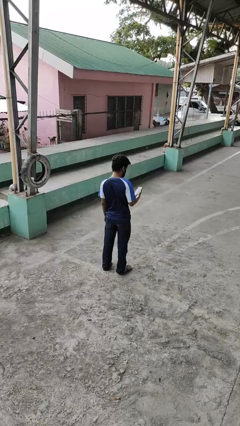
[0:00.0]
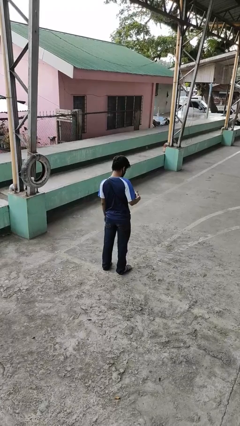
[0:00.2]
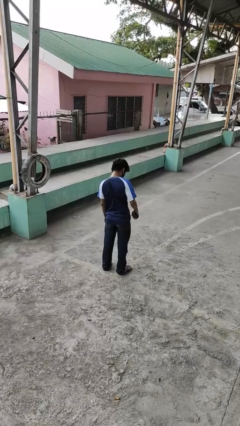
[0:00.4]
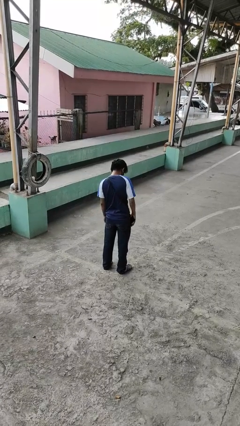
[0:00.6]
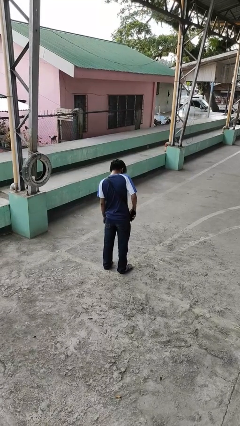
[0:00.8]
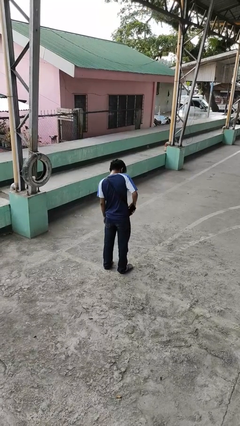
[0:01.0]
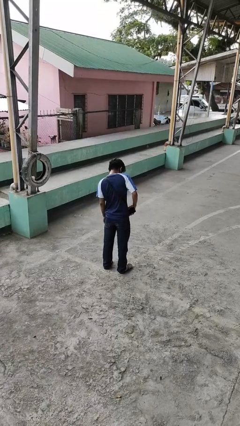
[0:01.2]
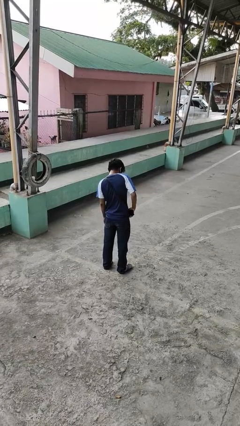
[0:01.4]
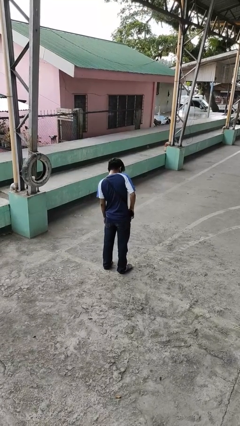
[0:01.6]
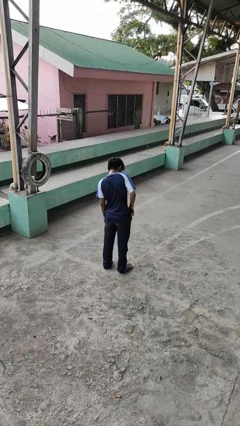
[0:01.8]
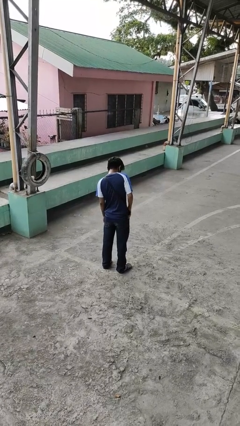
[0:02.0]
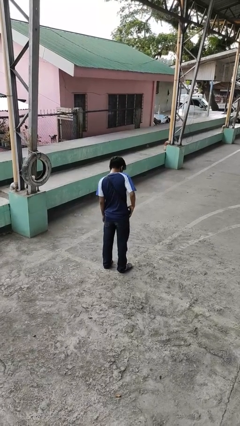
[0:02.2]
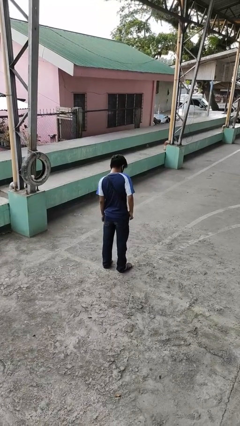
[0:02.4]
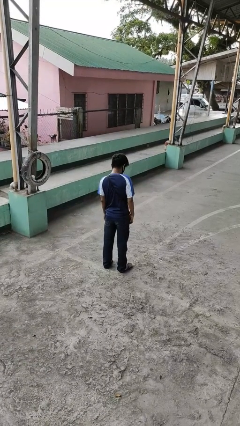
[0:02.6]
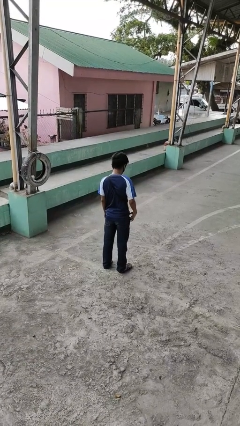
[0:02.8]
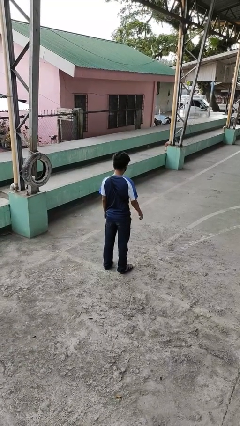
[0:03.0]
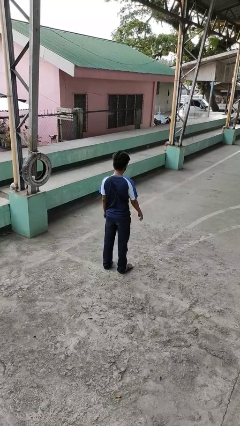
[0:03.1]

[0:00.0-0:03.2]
person puts phone into pocket

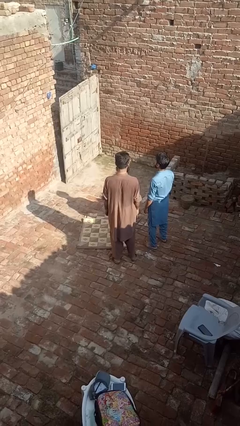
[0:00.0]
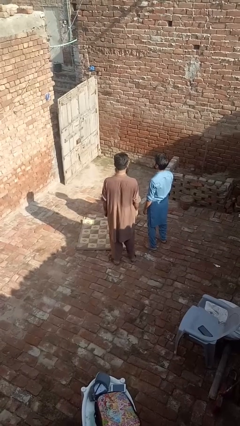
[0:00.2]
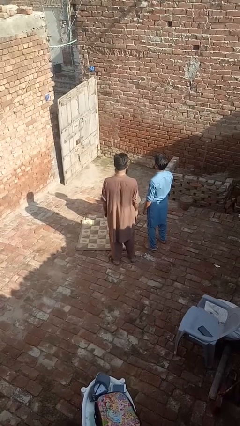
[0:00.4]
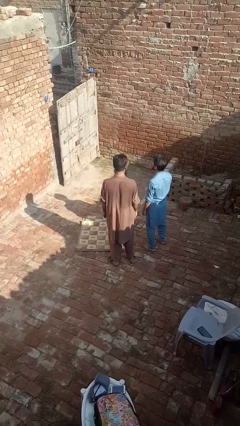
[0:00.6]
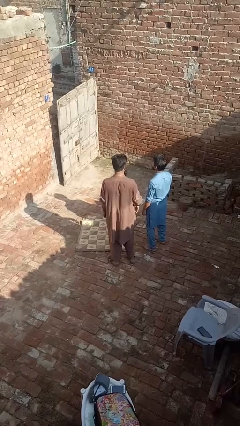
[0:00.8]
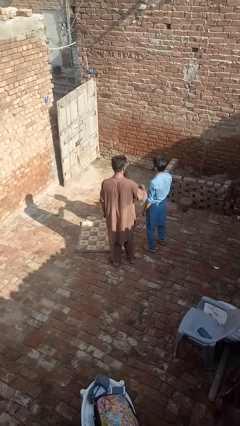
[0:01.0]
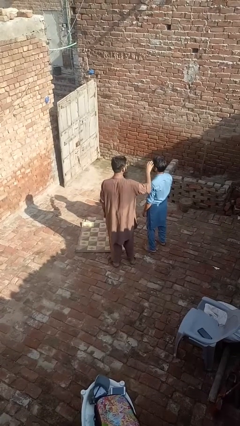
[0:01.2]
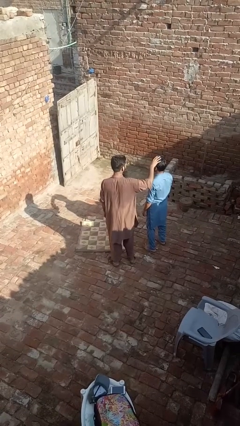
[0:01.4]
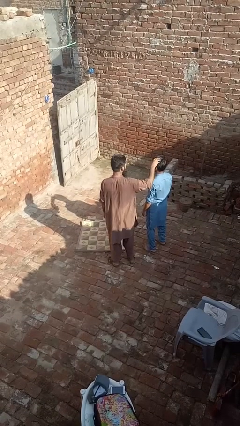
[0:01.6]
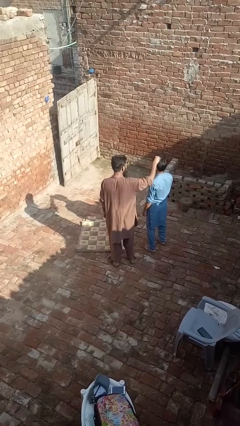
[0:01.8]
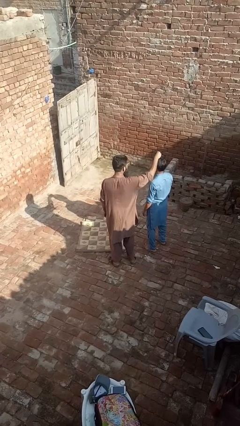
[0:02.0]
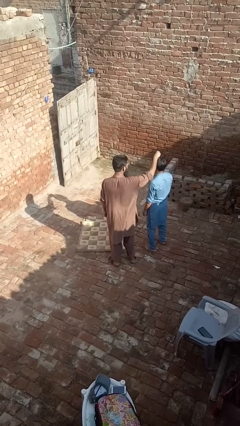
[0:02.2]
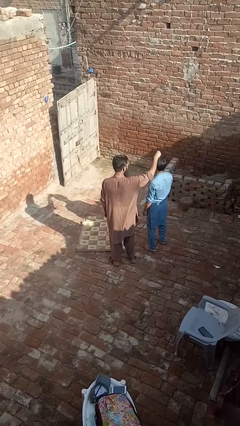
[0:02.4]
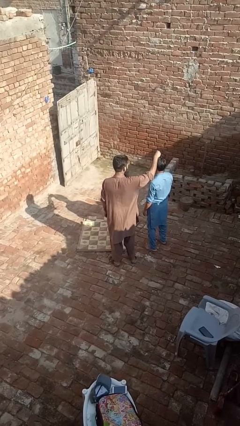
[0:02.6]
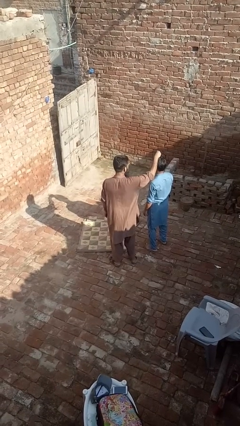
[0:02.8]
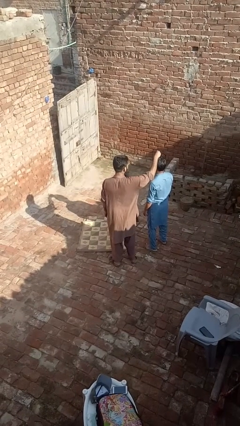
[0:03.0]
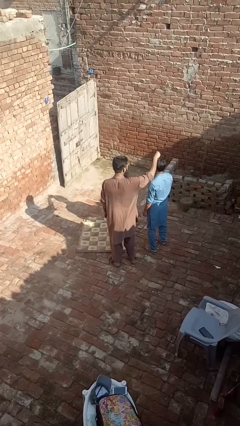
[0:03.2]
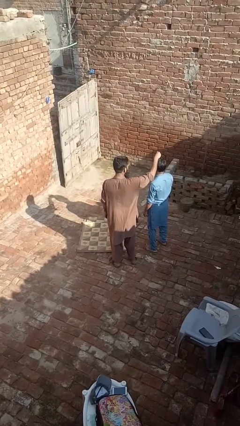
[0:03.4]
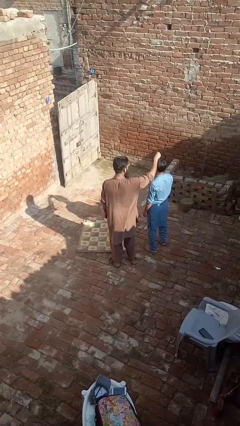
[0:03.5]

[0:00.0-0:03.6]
person grabs person by hair

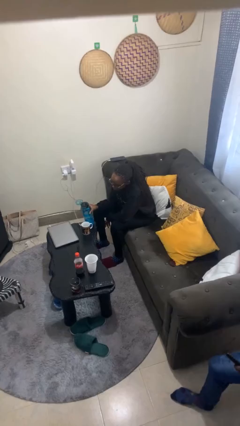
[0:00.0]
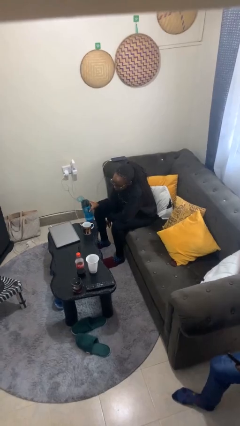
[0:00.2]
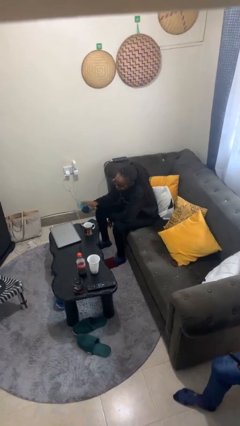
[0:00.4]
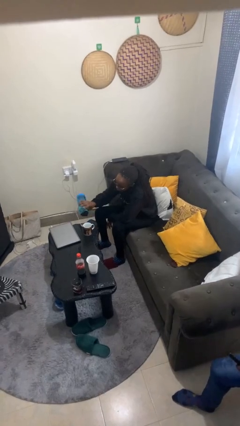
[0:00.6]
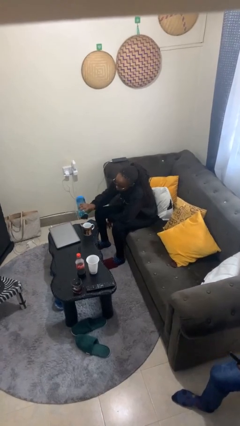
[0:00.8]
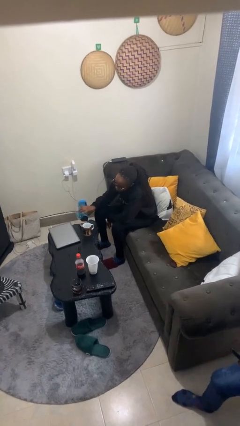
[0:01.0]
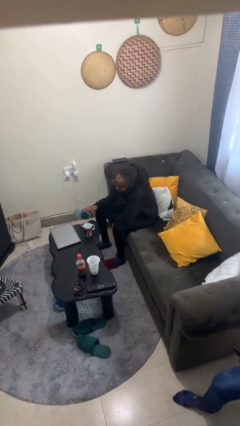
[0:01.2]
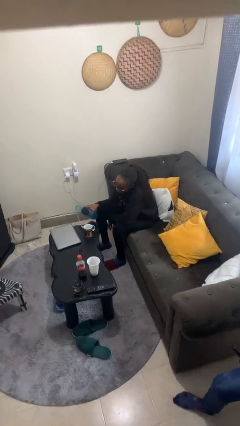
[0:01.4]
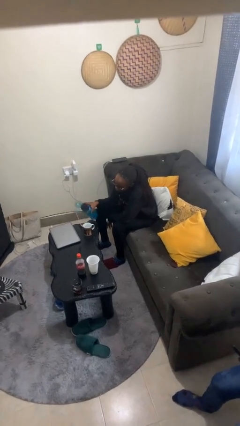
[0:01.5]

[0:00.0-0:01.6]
person pours liquid into cup

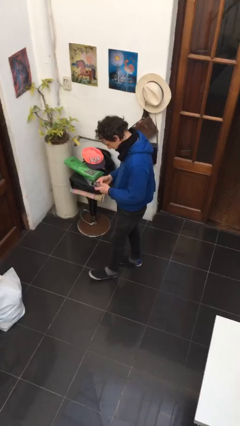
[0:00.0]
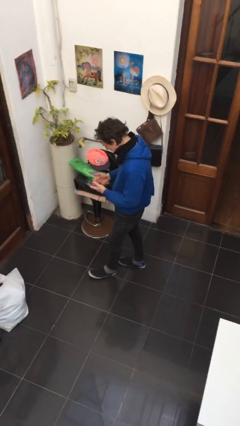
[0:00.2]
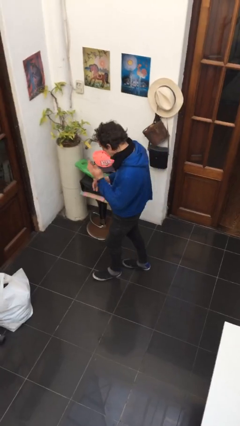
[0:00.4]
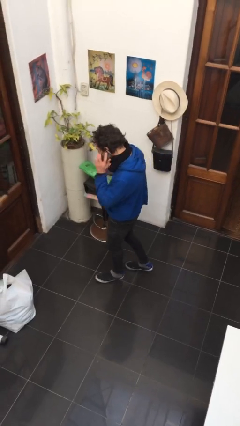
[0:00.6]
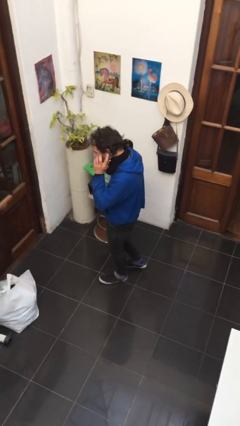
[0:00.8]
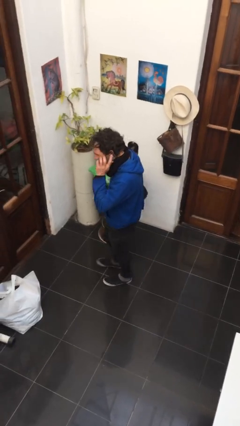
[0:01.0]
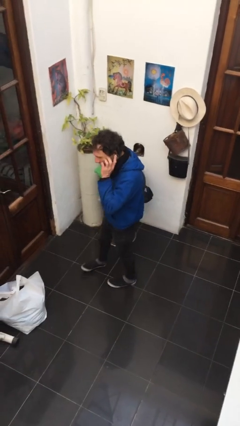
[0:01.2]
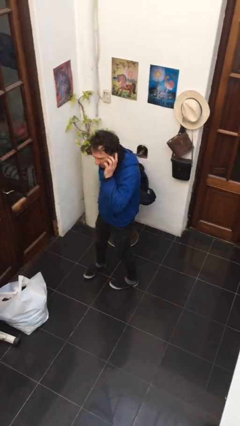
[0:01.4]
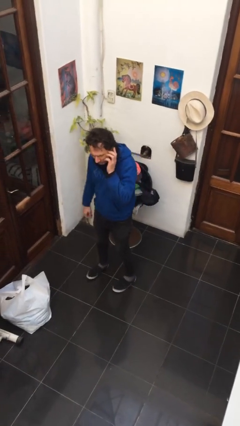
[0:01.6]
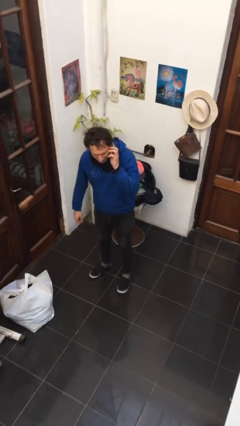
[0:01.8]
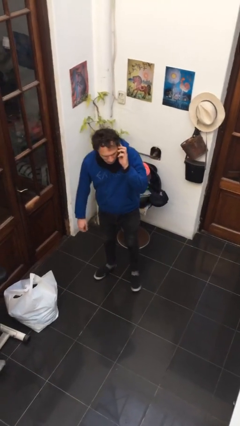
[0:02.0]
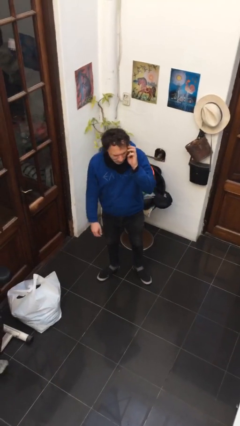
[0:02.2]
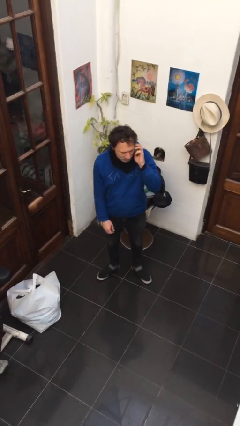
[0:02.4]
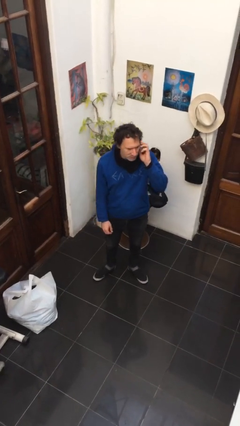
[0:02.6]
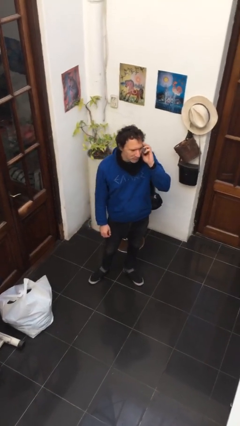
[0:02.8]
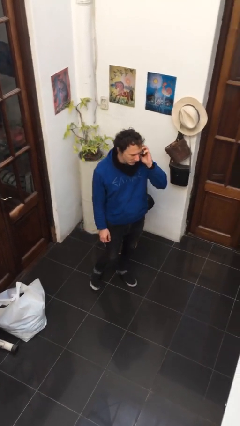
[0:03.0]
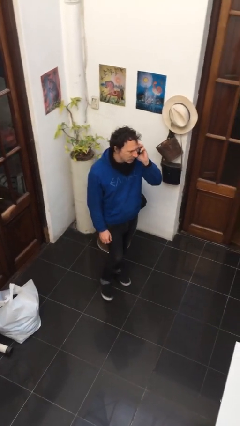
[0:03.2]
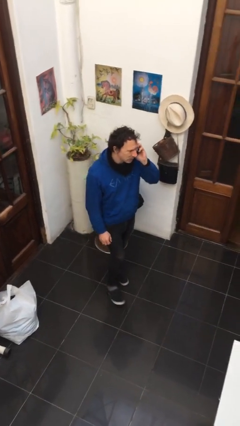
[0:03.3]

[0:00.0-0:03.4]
person talks on phone

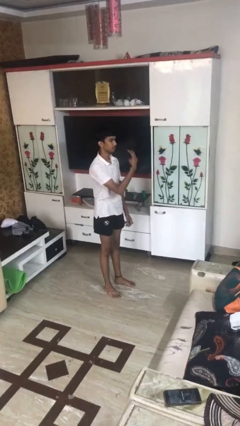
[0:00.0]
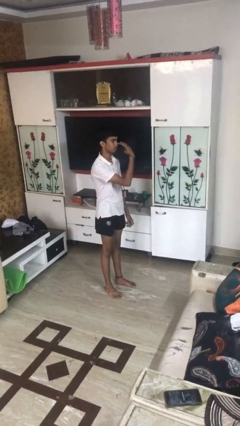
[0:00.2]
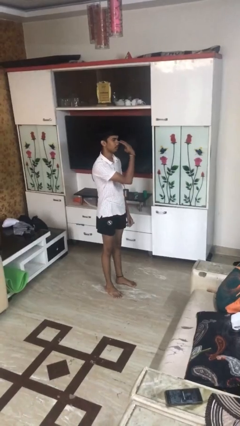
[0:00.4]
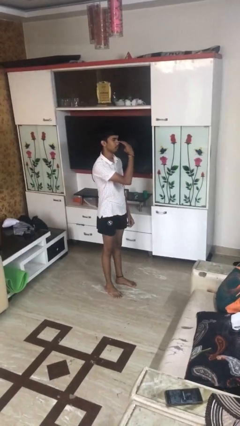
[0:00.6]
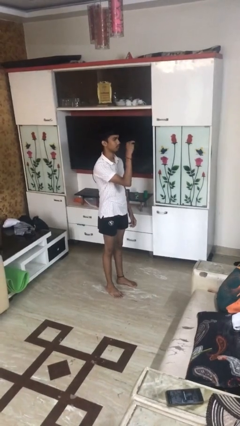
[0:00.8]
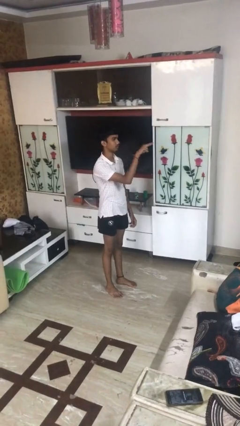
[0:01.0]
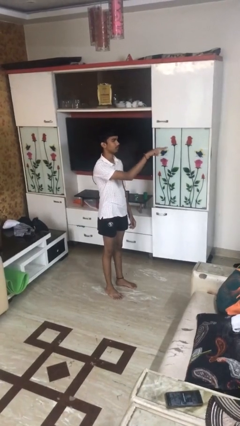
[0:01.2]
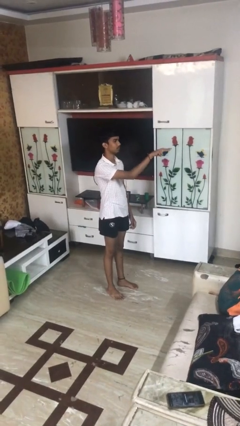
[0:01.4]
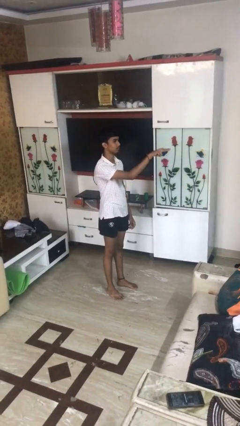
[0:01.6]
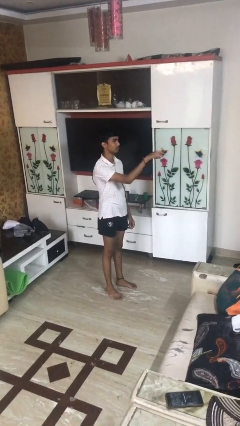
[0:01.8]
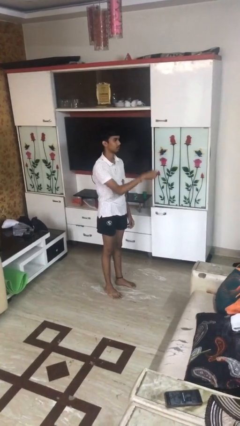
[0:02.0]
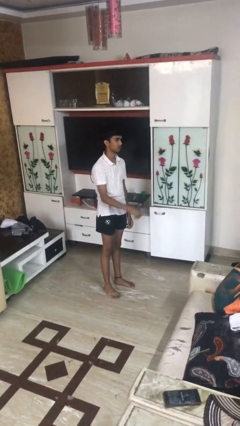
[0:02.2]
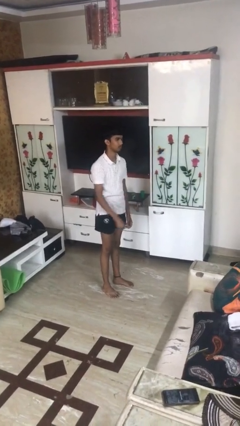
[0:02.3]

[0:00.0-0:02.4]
person gestures watch closely

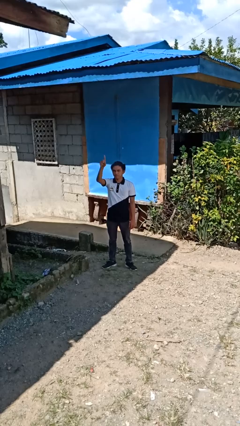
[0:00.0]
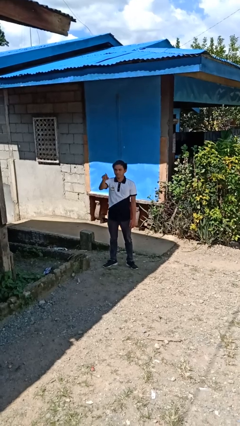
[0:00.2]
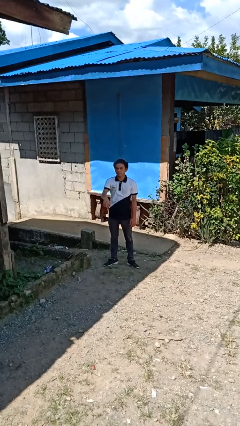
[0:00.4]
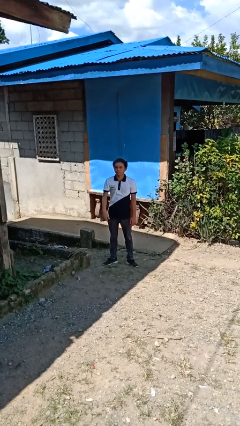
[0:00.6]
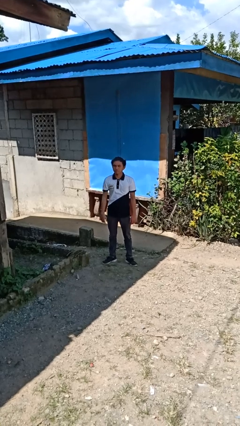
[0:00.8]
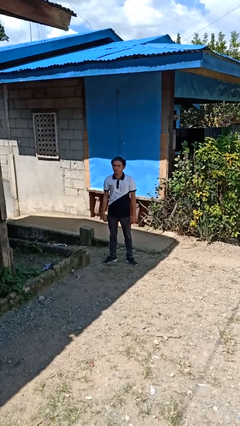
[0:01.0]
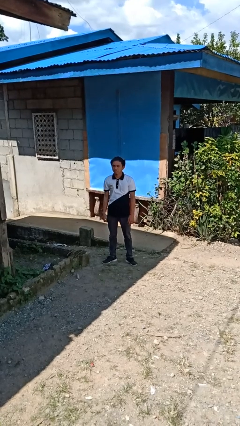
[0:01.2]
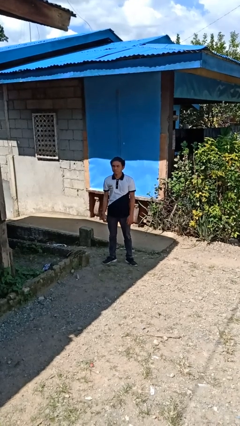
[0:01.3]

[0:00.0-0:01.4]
person gestures swipe down

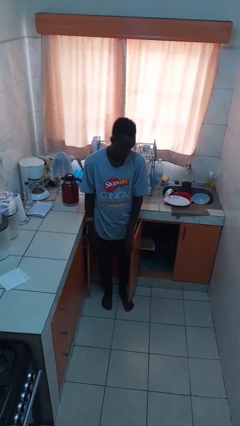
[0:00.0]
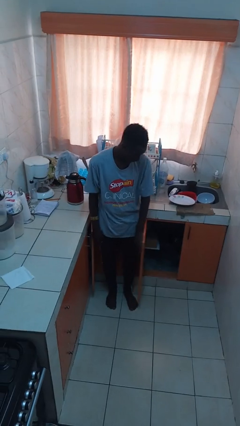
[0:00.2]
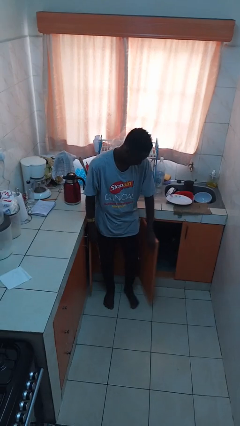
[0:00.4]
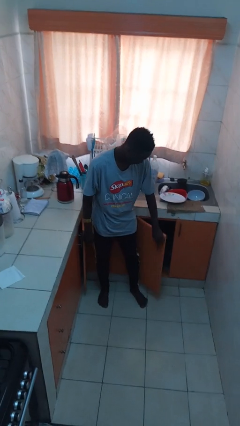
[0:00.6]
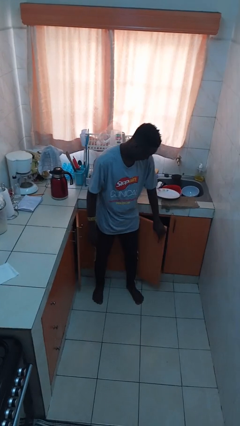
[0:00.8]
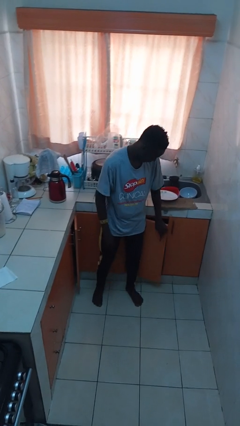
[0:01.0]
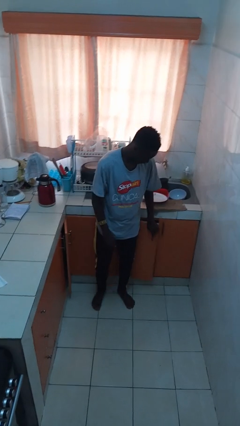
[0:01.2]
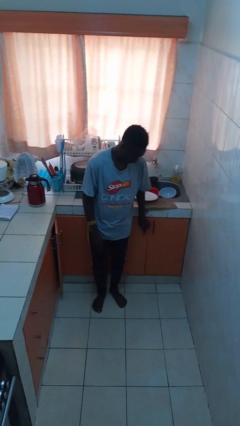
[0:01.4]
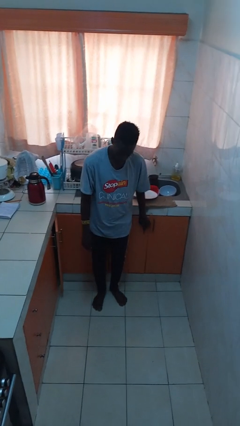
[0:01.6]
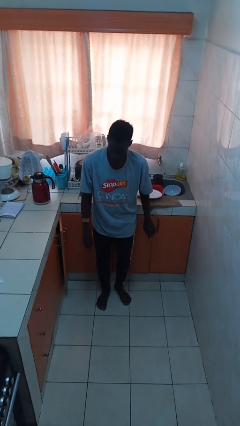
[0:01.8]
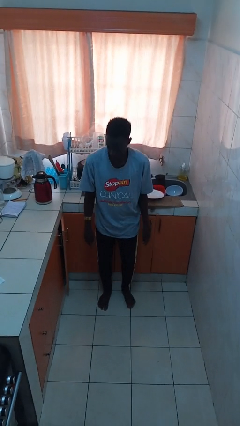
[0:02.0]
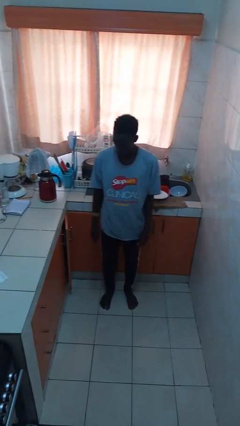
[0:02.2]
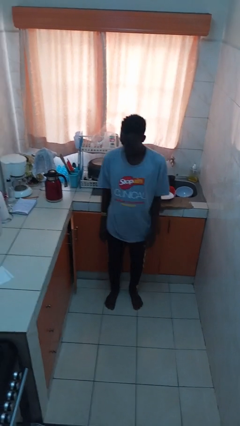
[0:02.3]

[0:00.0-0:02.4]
person closes cabinet
